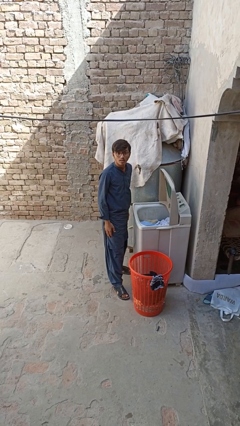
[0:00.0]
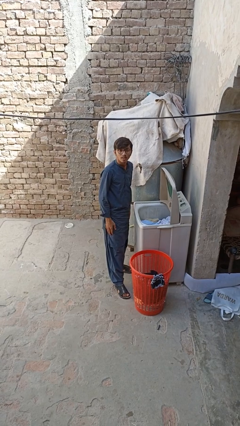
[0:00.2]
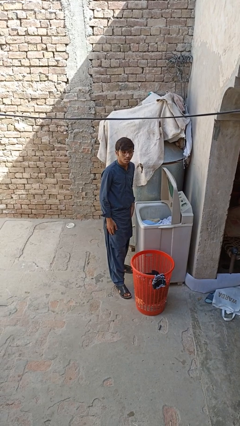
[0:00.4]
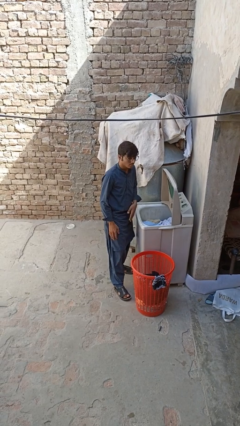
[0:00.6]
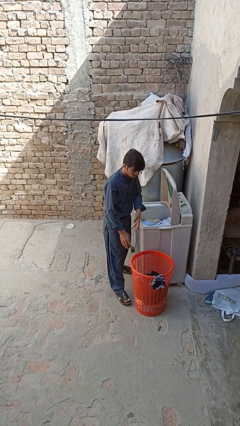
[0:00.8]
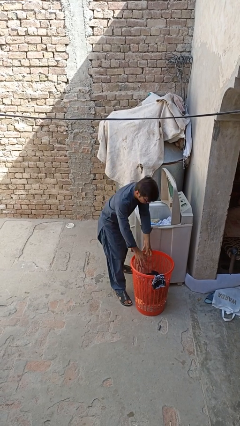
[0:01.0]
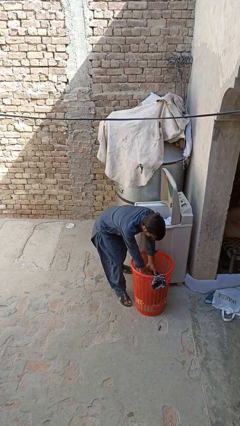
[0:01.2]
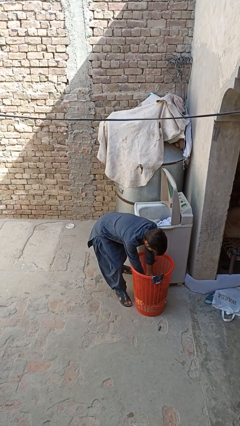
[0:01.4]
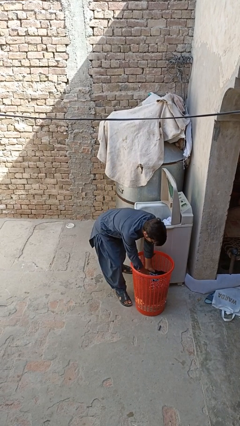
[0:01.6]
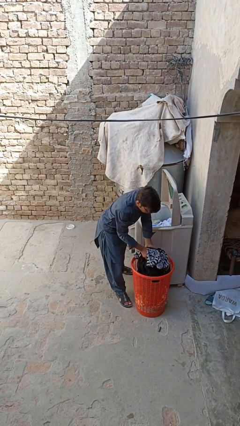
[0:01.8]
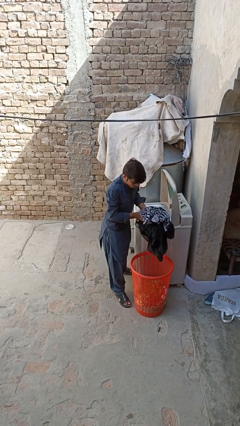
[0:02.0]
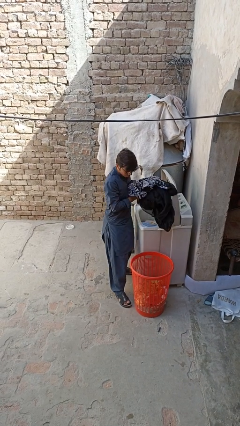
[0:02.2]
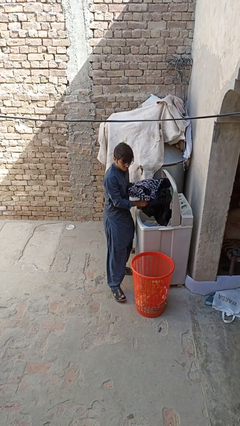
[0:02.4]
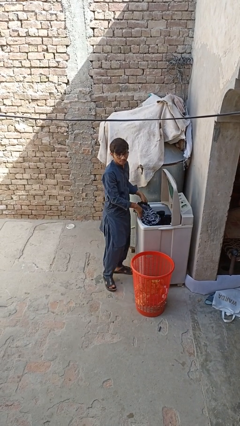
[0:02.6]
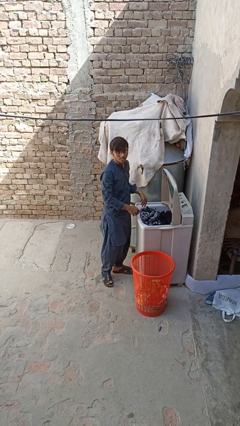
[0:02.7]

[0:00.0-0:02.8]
person loads clotheswasher

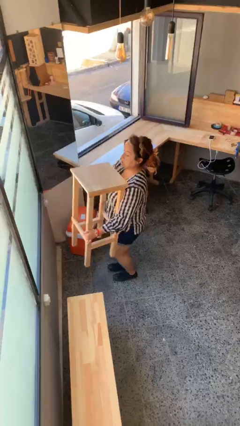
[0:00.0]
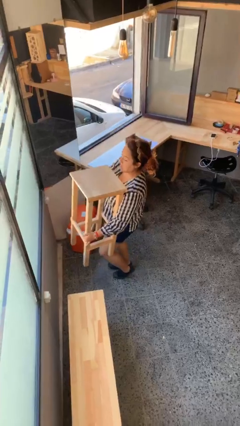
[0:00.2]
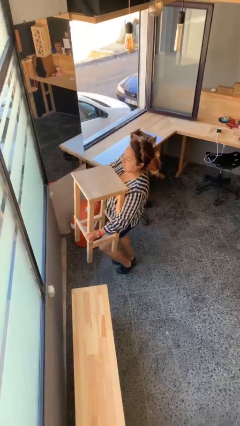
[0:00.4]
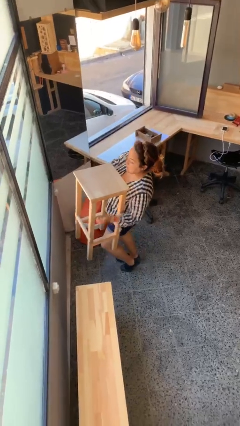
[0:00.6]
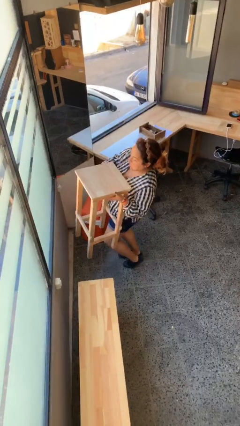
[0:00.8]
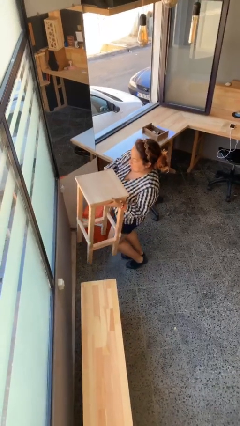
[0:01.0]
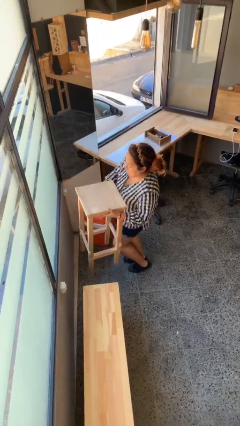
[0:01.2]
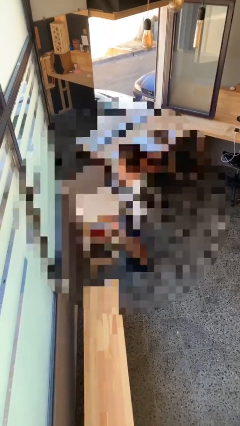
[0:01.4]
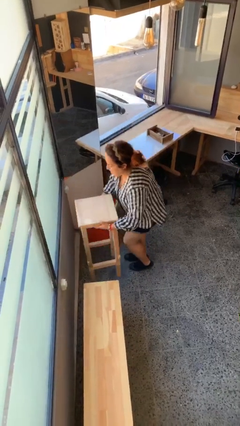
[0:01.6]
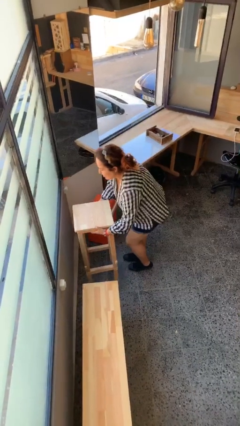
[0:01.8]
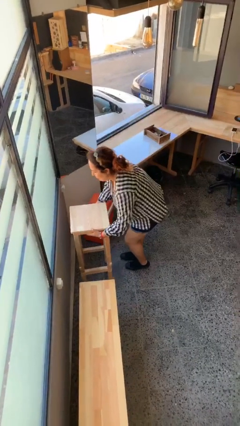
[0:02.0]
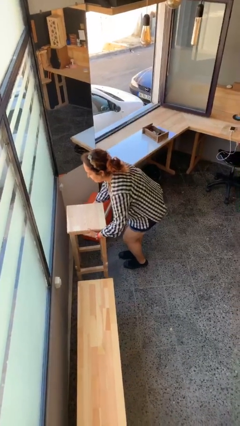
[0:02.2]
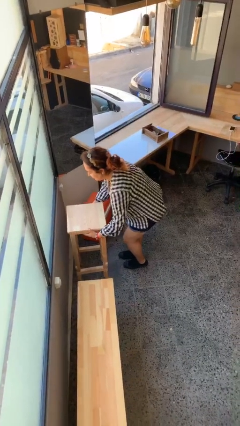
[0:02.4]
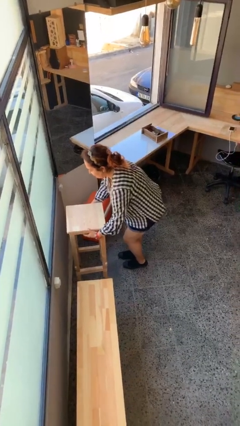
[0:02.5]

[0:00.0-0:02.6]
person puts down object on floor

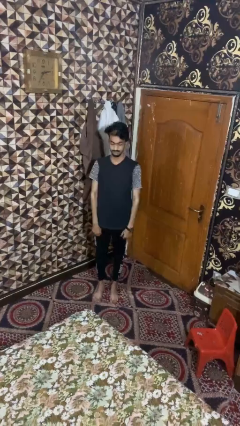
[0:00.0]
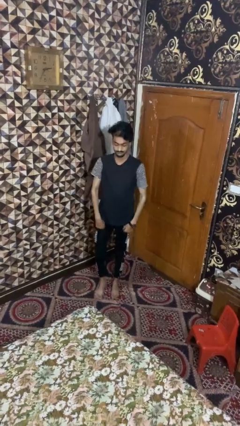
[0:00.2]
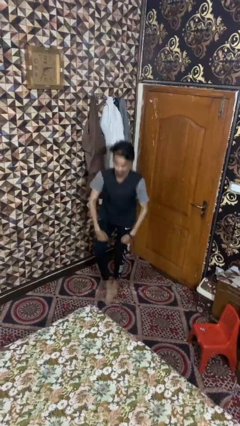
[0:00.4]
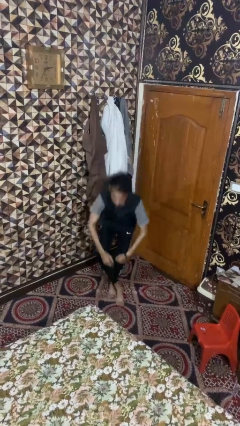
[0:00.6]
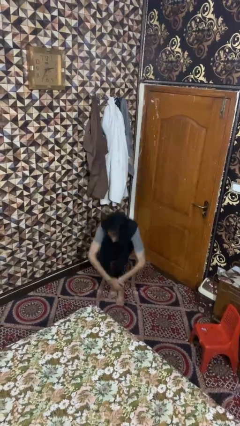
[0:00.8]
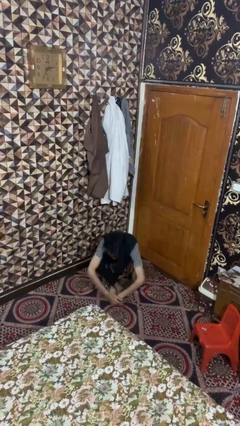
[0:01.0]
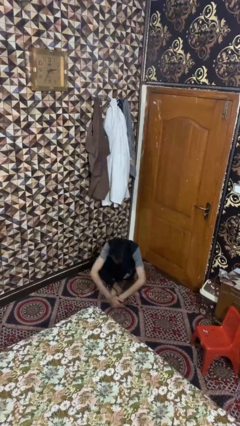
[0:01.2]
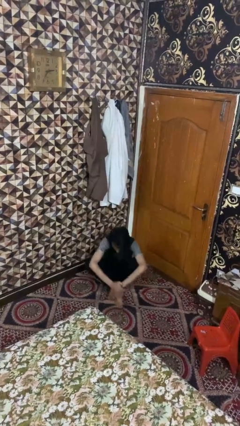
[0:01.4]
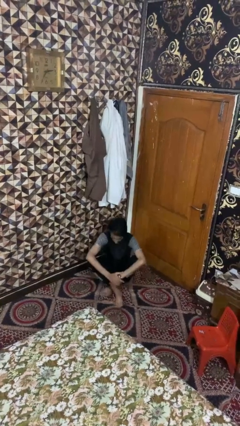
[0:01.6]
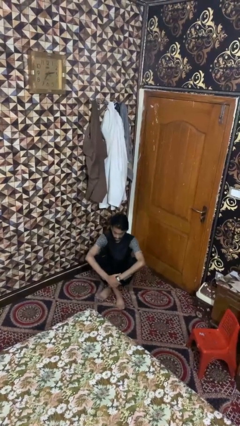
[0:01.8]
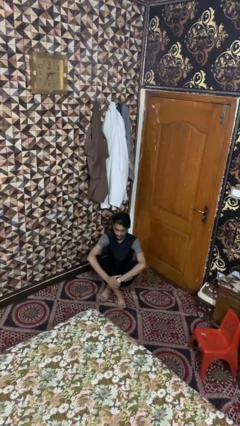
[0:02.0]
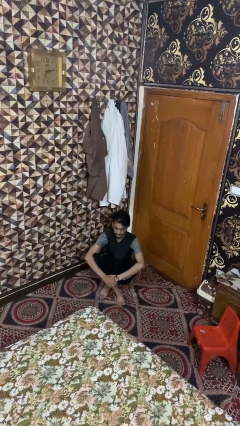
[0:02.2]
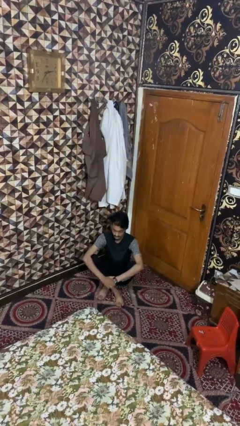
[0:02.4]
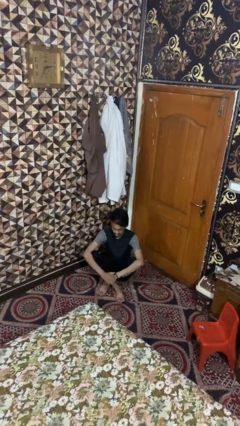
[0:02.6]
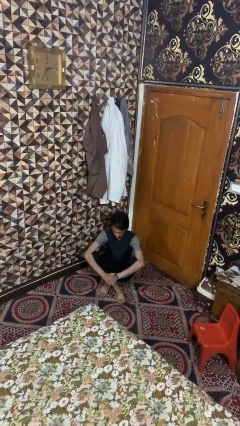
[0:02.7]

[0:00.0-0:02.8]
person sits crisscross

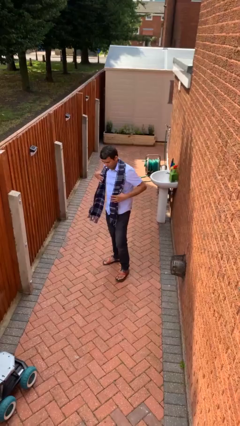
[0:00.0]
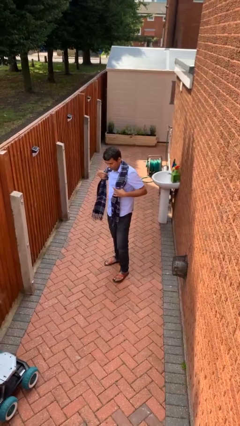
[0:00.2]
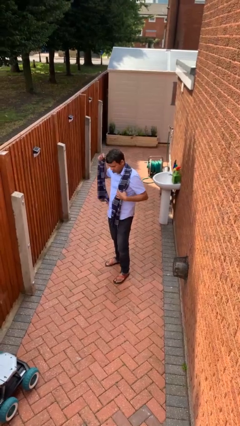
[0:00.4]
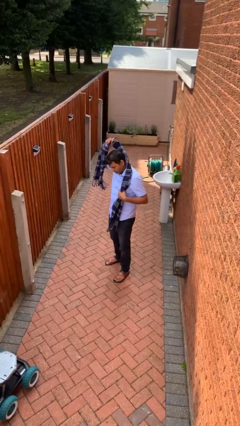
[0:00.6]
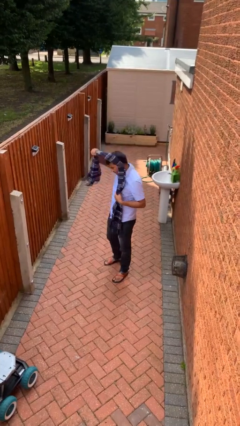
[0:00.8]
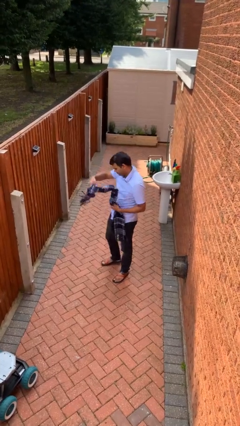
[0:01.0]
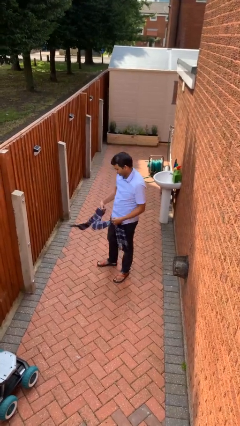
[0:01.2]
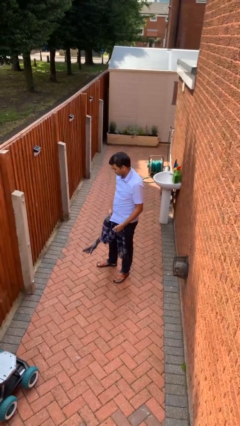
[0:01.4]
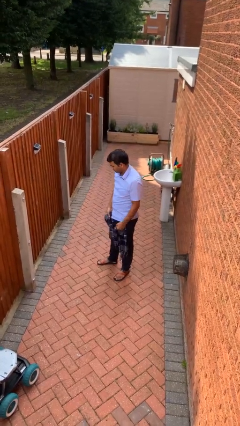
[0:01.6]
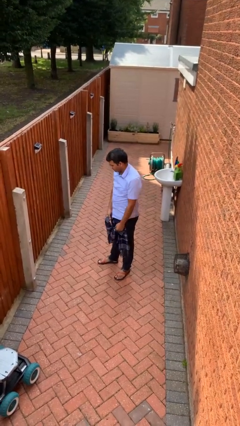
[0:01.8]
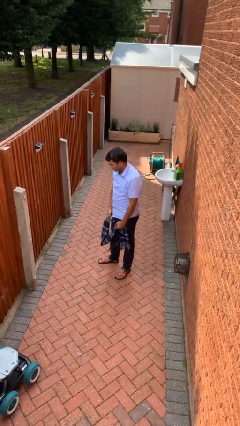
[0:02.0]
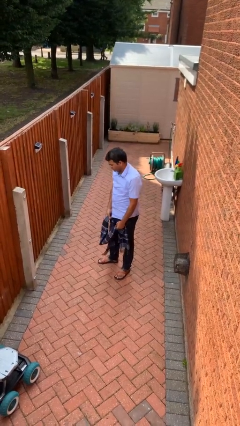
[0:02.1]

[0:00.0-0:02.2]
person takes off scarf

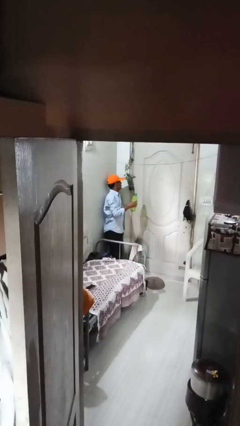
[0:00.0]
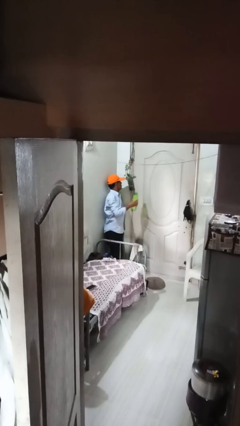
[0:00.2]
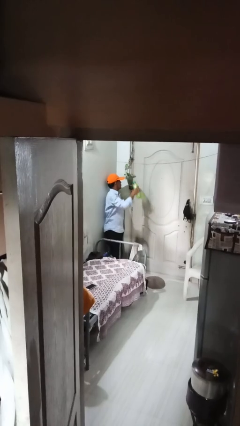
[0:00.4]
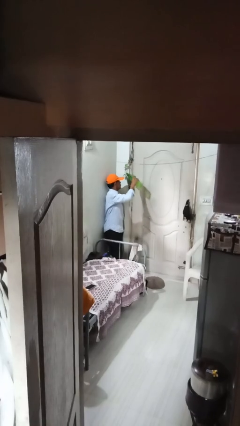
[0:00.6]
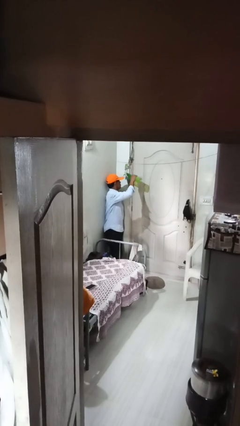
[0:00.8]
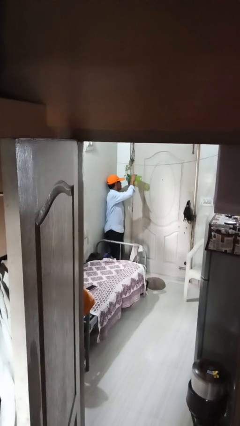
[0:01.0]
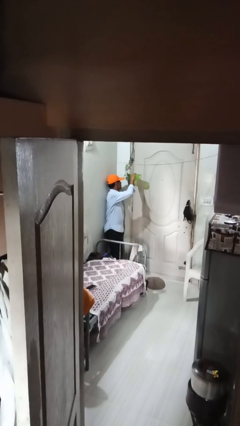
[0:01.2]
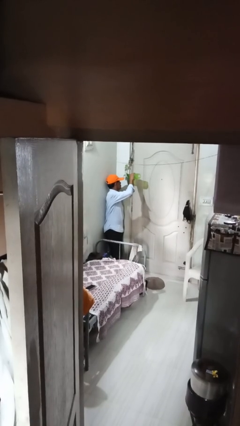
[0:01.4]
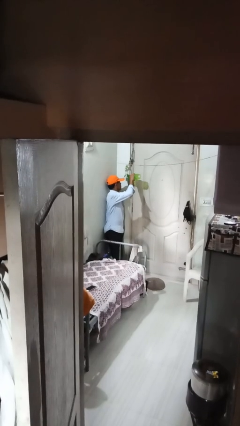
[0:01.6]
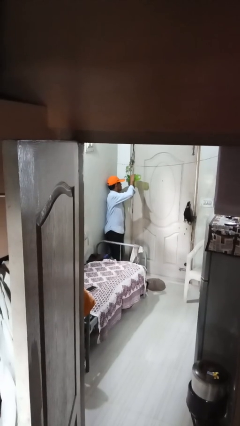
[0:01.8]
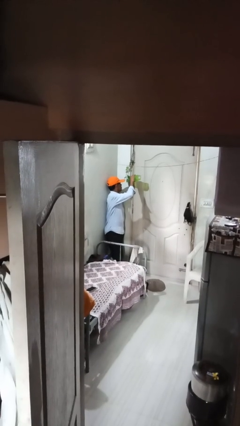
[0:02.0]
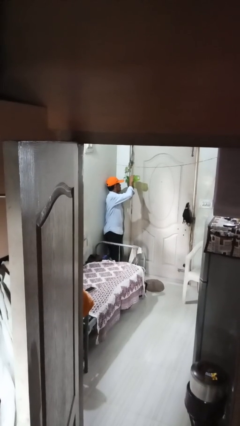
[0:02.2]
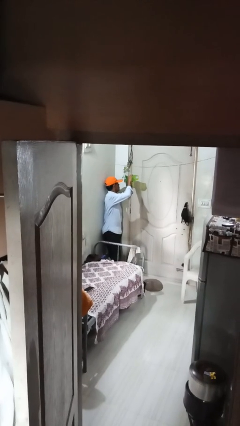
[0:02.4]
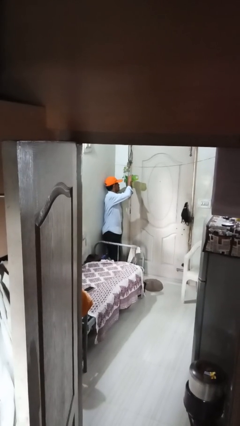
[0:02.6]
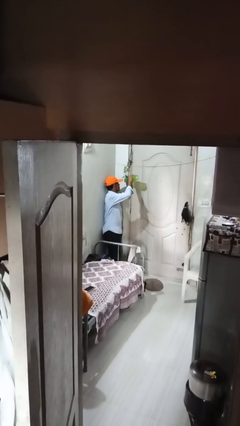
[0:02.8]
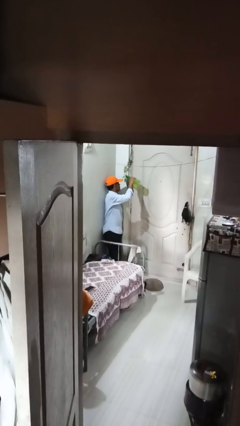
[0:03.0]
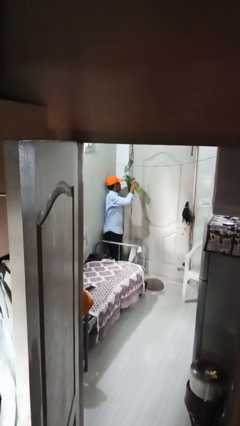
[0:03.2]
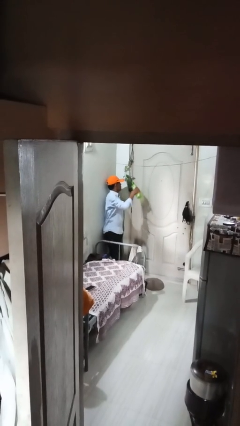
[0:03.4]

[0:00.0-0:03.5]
person waters houseplant

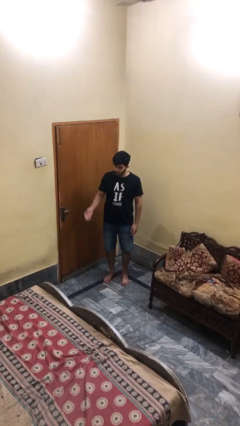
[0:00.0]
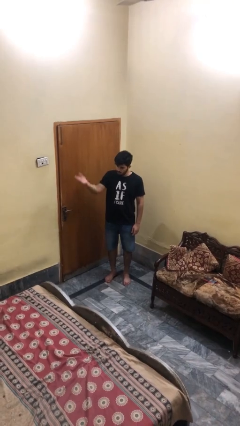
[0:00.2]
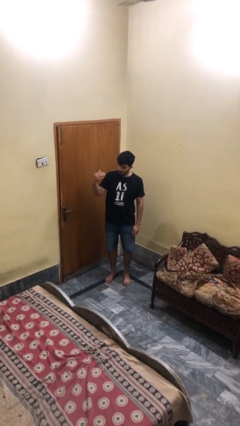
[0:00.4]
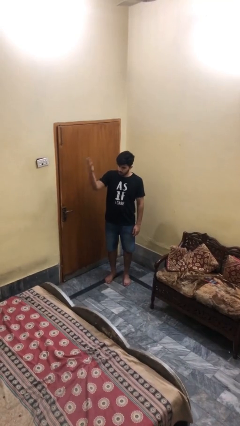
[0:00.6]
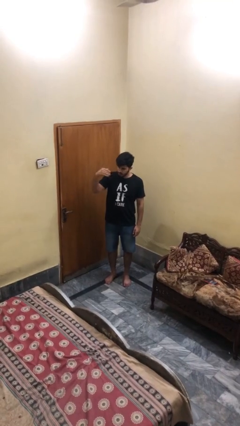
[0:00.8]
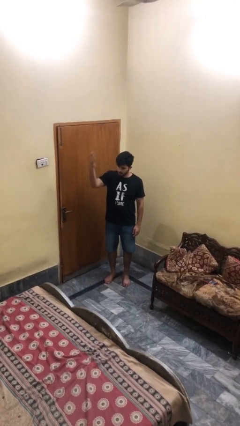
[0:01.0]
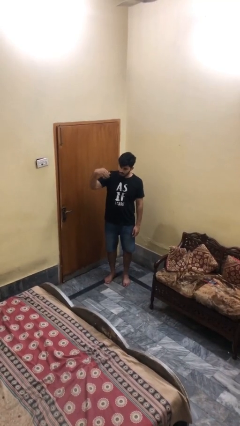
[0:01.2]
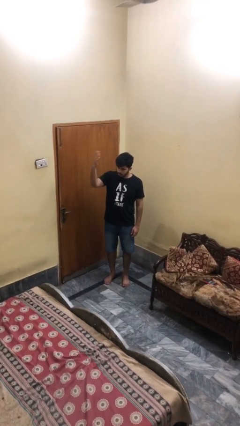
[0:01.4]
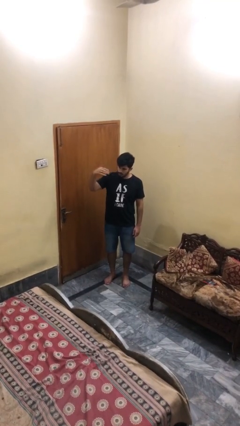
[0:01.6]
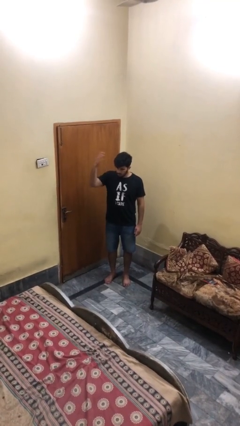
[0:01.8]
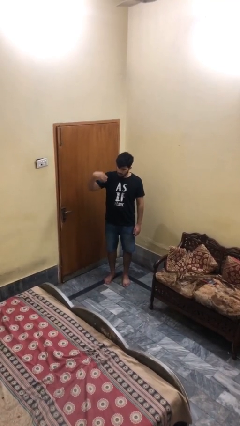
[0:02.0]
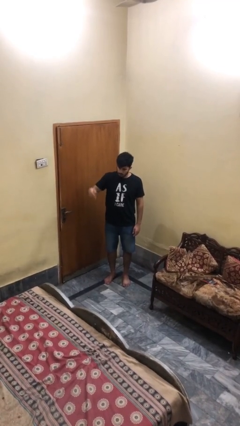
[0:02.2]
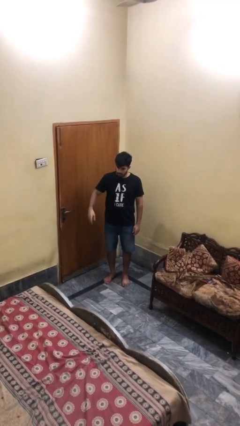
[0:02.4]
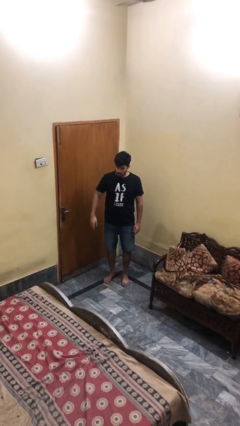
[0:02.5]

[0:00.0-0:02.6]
person gestures come here

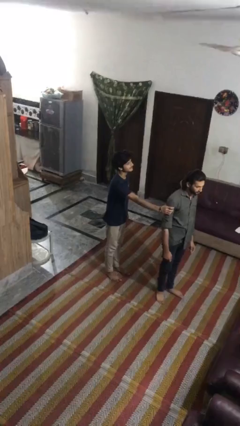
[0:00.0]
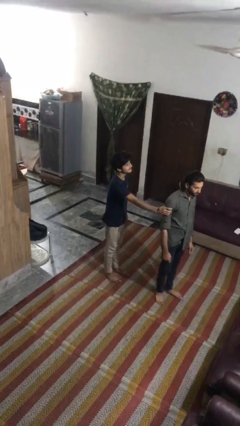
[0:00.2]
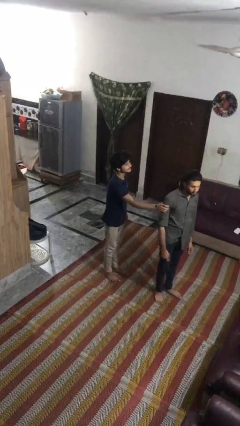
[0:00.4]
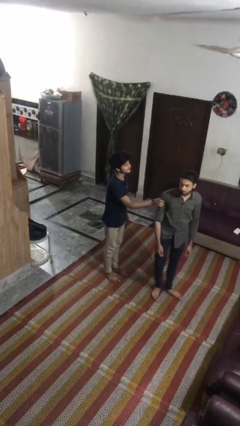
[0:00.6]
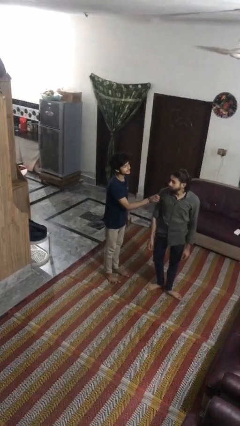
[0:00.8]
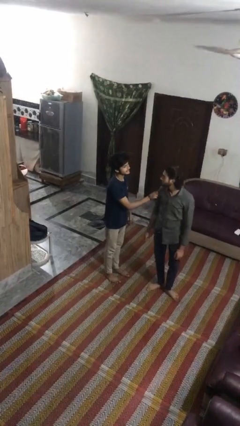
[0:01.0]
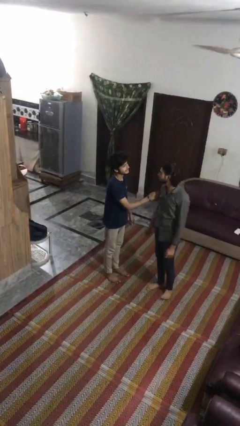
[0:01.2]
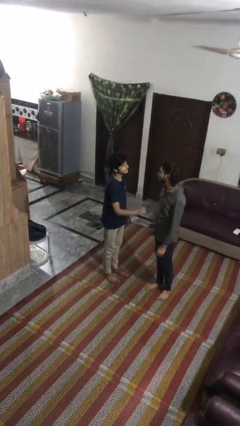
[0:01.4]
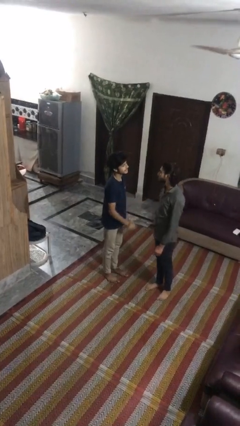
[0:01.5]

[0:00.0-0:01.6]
person spins person around
